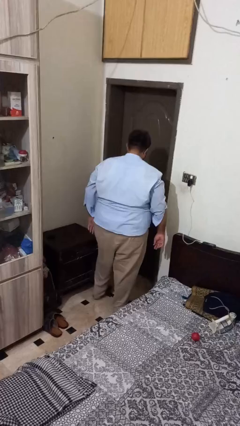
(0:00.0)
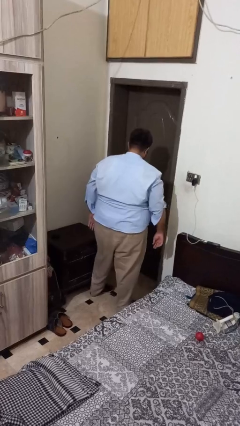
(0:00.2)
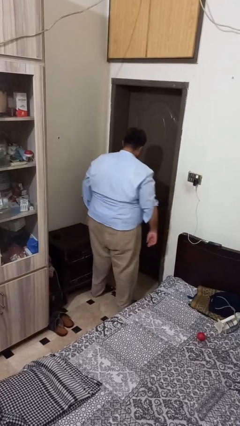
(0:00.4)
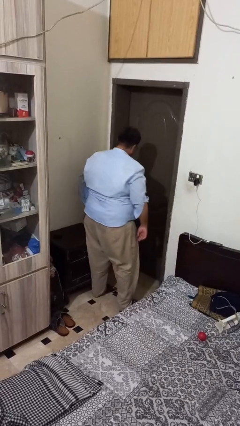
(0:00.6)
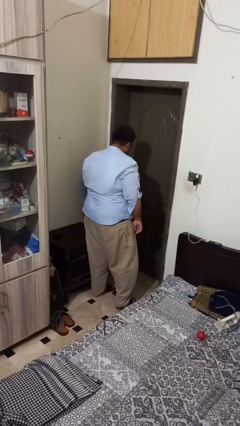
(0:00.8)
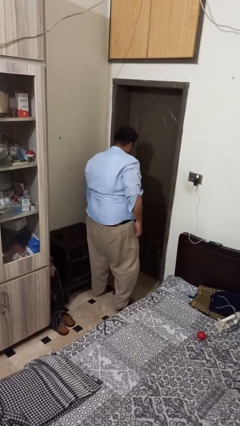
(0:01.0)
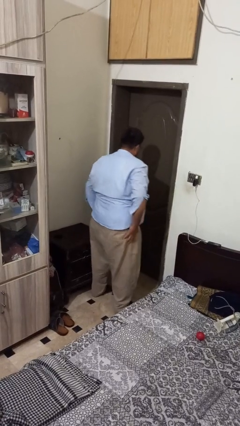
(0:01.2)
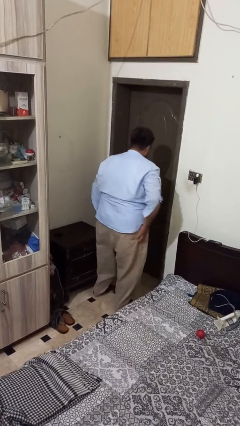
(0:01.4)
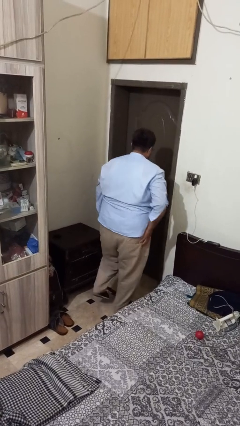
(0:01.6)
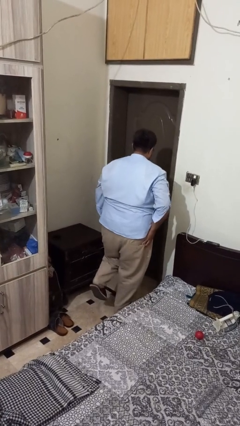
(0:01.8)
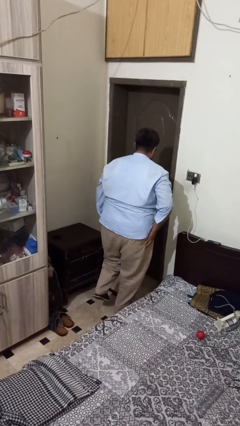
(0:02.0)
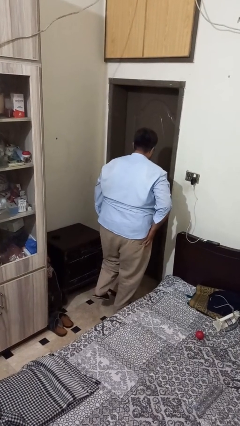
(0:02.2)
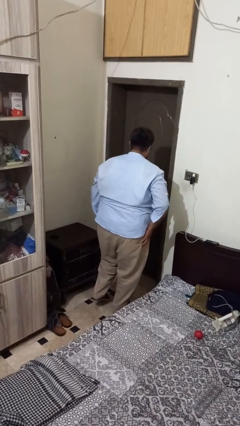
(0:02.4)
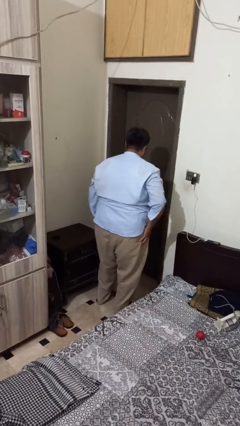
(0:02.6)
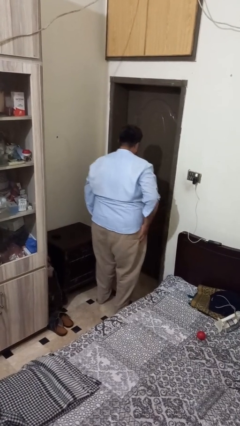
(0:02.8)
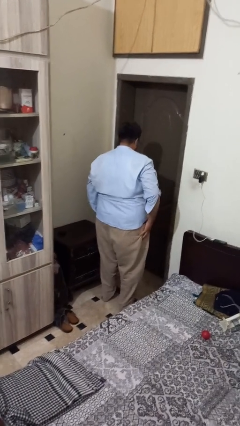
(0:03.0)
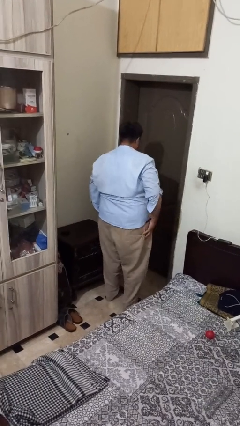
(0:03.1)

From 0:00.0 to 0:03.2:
person bumps into table

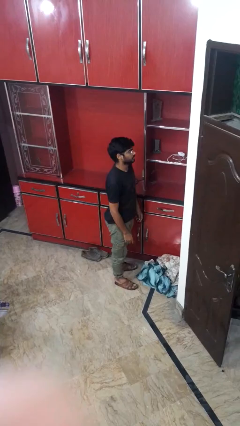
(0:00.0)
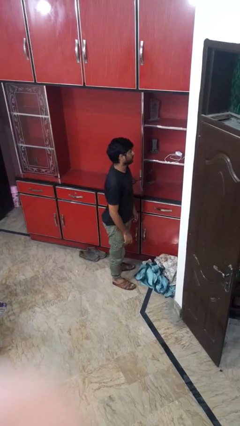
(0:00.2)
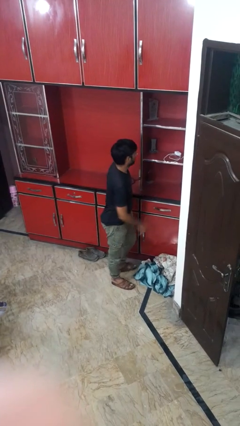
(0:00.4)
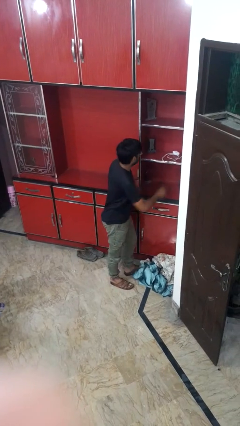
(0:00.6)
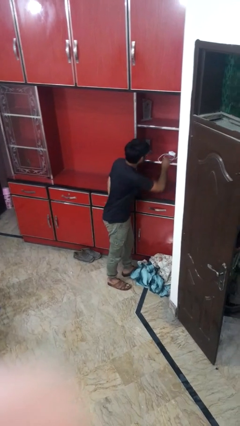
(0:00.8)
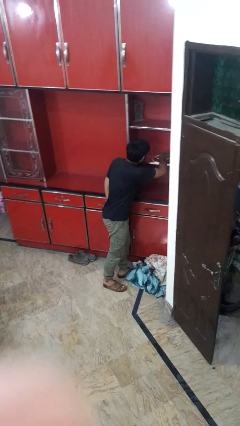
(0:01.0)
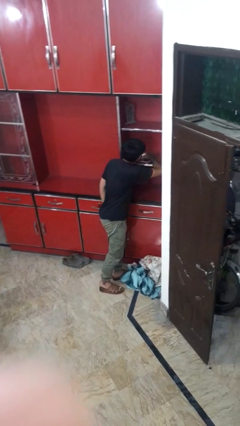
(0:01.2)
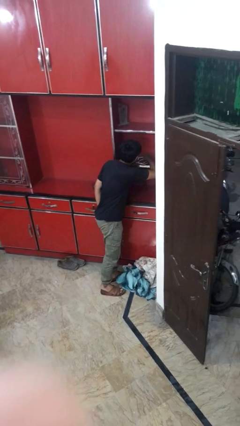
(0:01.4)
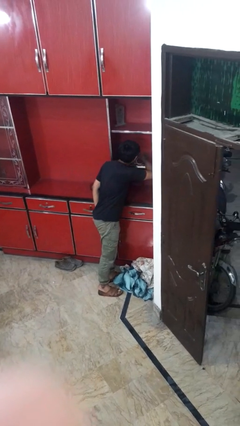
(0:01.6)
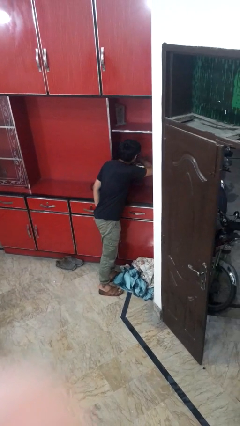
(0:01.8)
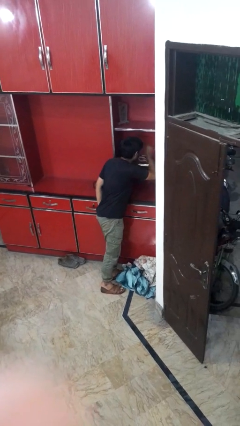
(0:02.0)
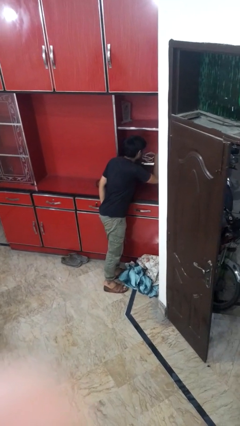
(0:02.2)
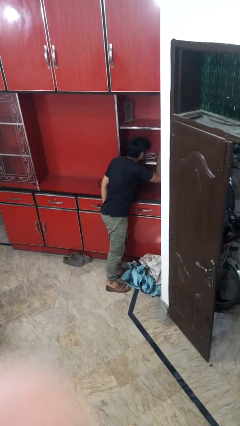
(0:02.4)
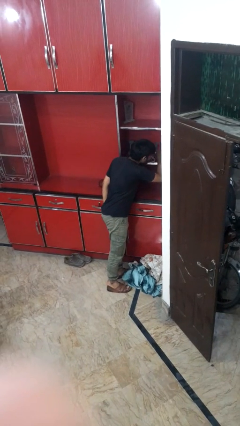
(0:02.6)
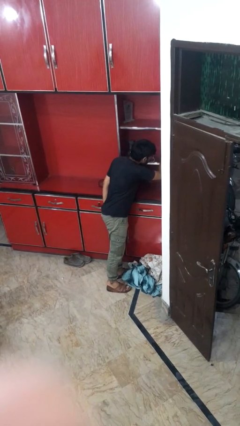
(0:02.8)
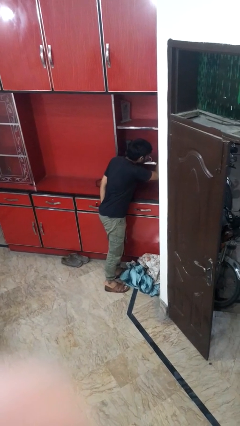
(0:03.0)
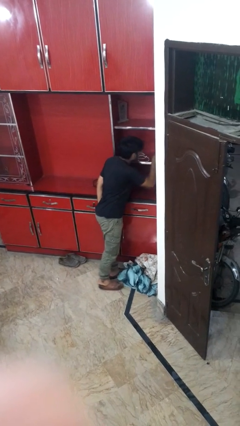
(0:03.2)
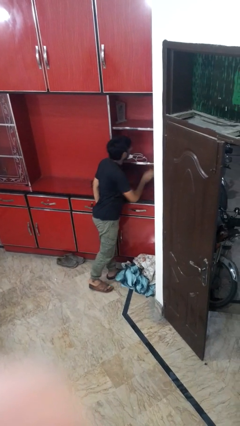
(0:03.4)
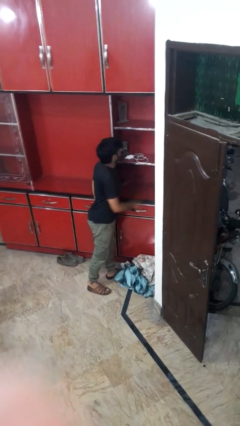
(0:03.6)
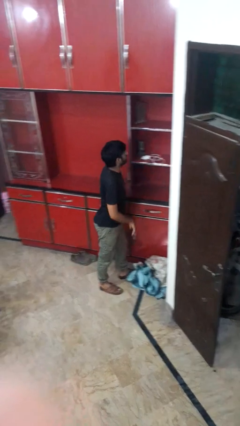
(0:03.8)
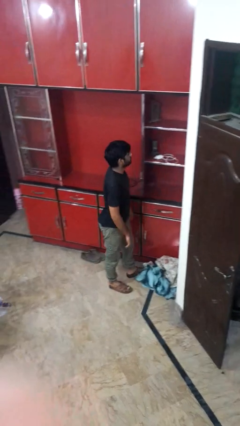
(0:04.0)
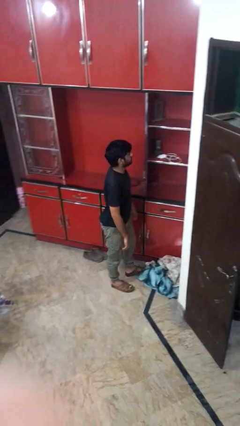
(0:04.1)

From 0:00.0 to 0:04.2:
person searches in cabinet

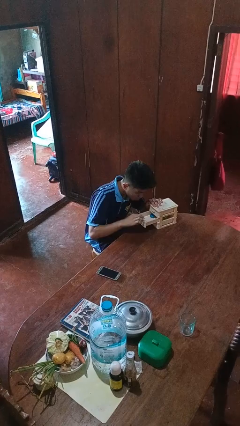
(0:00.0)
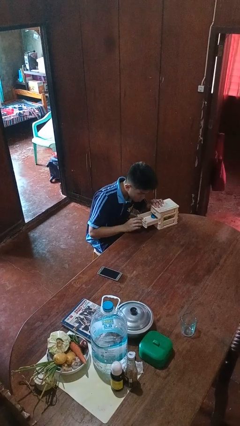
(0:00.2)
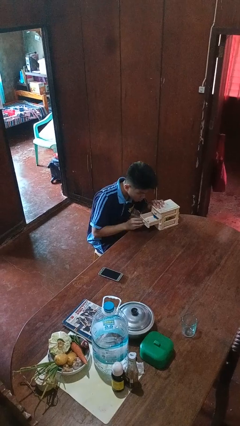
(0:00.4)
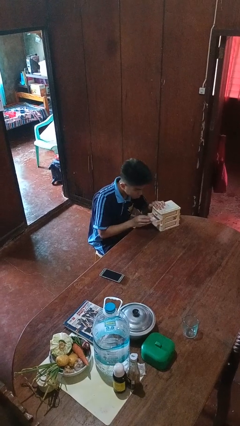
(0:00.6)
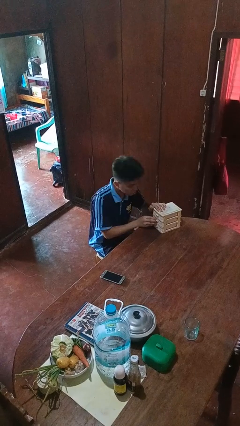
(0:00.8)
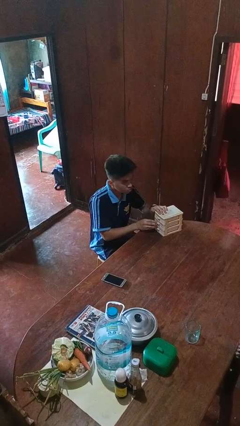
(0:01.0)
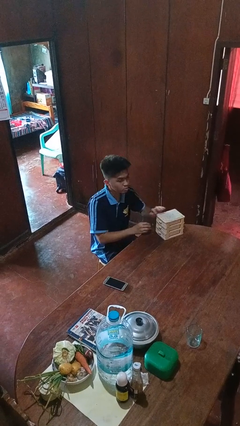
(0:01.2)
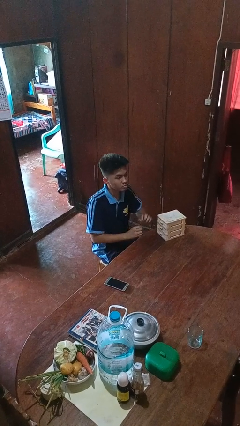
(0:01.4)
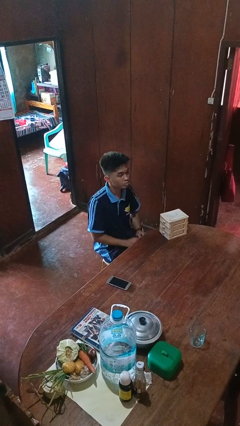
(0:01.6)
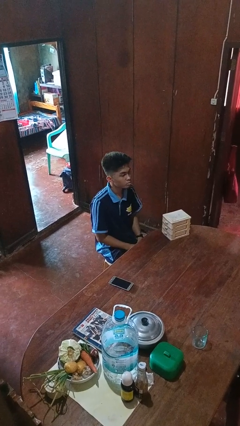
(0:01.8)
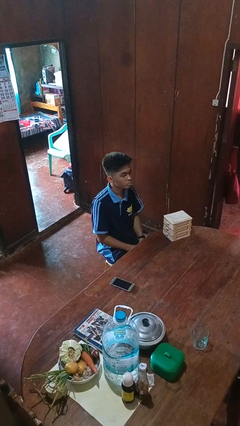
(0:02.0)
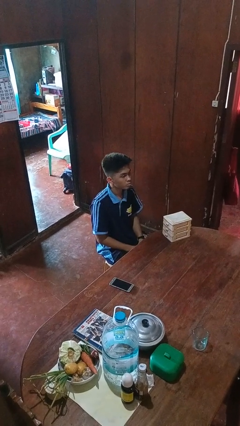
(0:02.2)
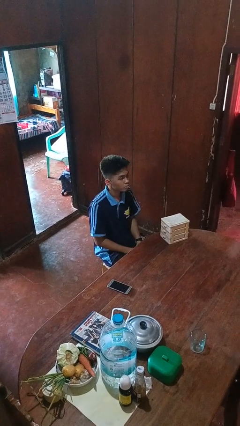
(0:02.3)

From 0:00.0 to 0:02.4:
person closes jewelry box

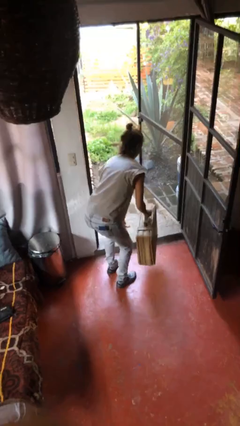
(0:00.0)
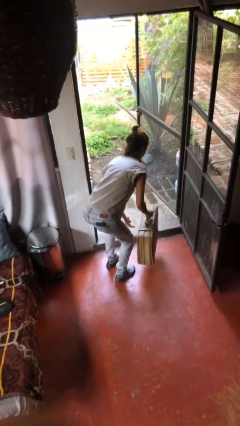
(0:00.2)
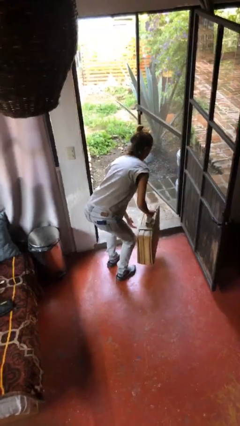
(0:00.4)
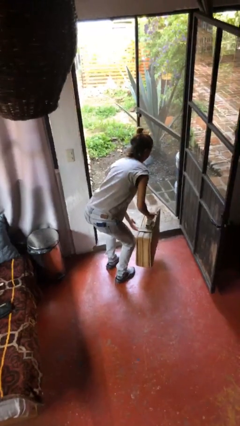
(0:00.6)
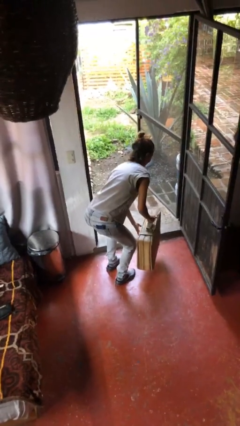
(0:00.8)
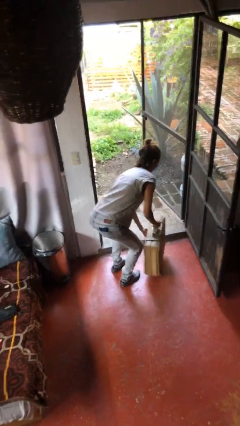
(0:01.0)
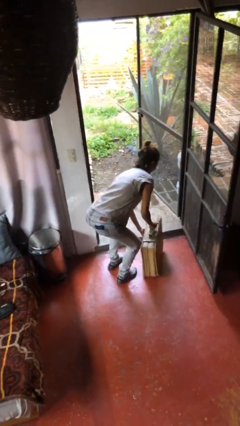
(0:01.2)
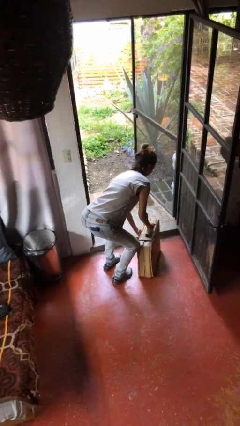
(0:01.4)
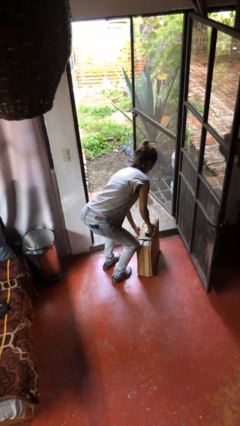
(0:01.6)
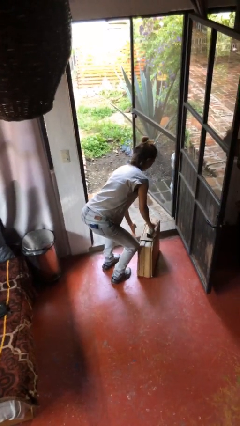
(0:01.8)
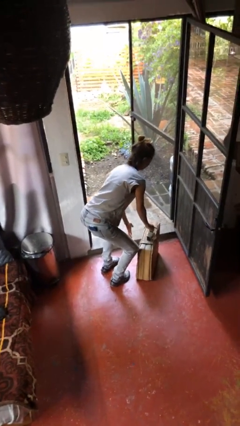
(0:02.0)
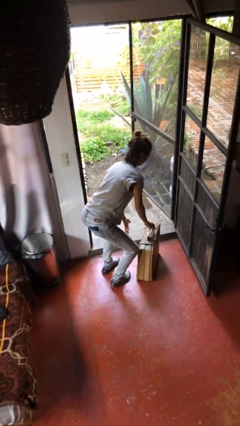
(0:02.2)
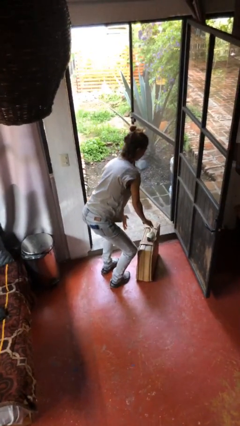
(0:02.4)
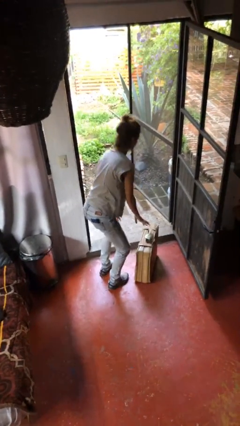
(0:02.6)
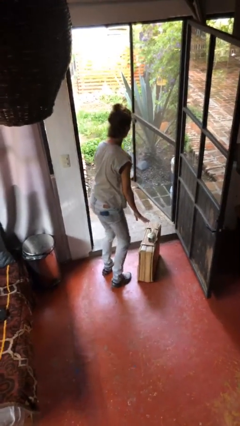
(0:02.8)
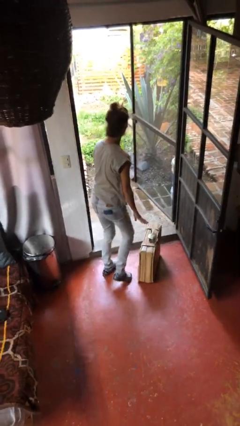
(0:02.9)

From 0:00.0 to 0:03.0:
person puts down object on floor

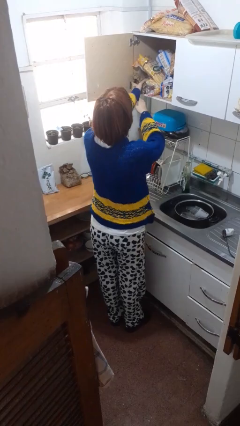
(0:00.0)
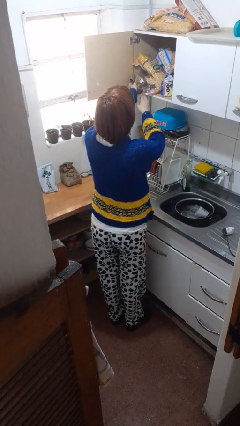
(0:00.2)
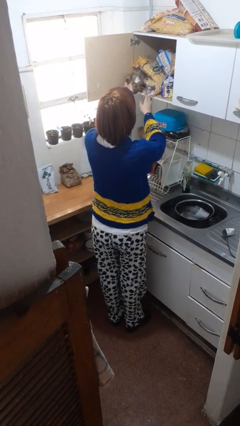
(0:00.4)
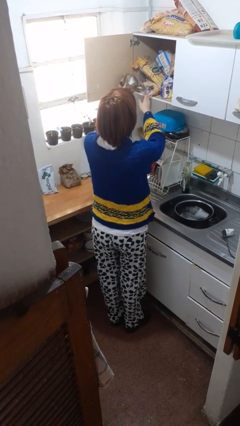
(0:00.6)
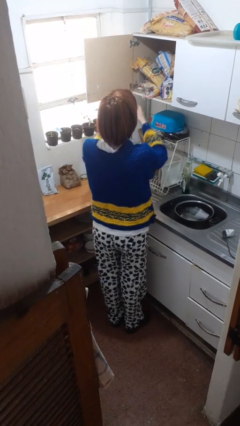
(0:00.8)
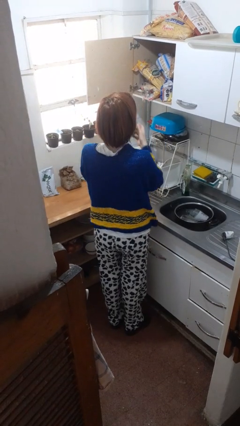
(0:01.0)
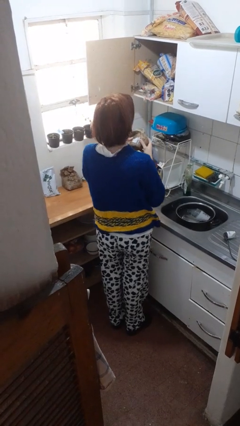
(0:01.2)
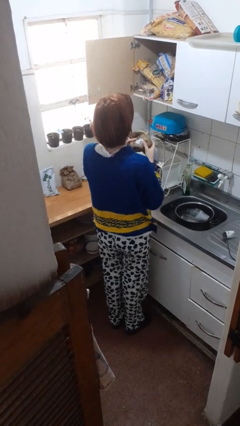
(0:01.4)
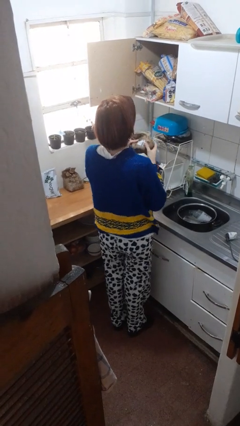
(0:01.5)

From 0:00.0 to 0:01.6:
person takes object from cabinet

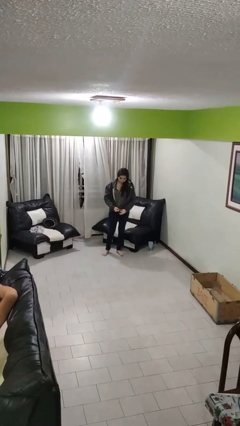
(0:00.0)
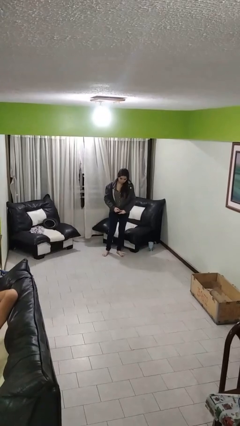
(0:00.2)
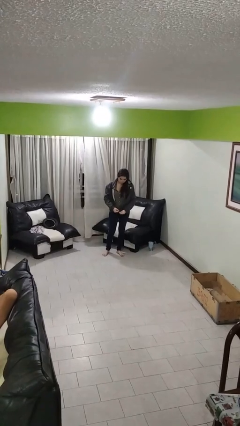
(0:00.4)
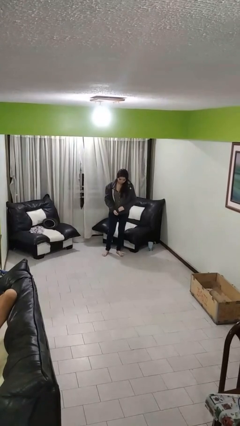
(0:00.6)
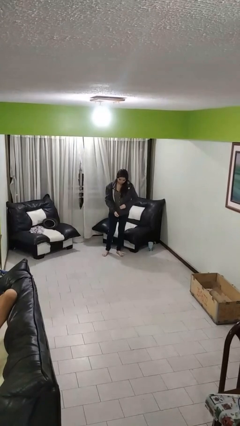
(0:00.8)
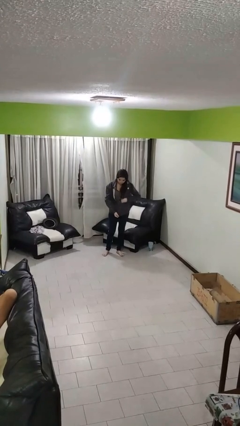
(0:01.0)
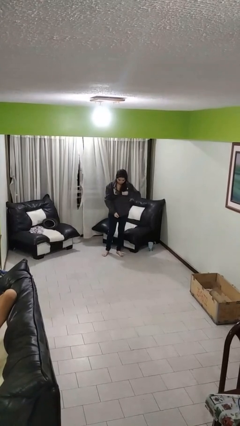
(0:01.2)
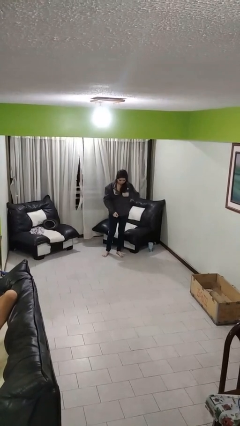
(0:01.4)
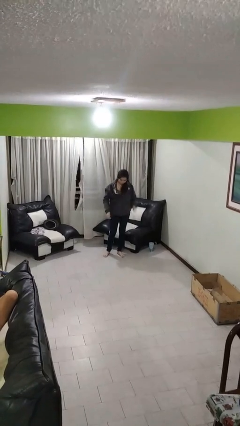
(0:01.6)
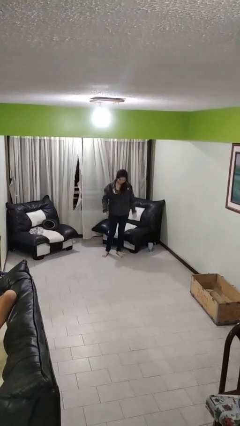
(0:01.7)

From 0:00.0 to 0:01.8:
person zips up jacket

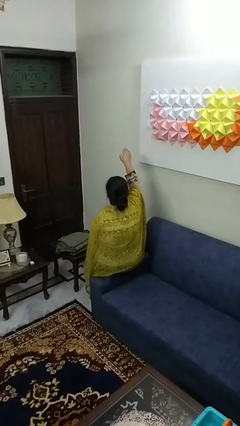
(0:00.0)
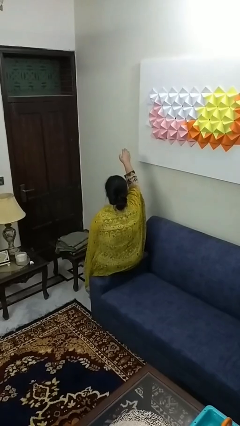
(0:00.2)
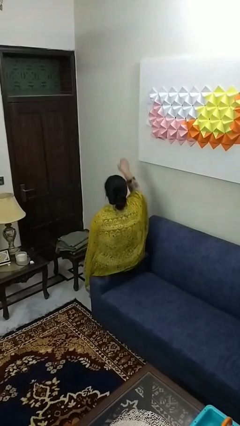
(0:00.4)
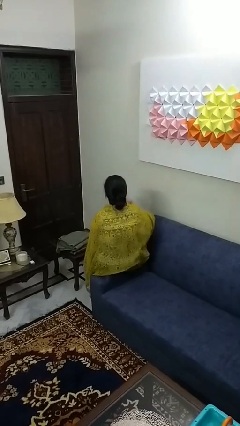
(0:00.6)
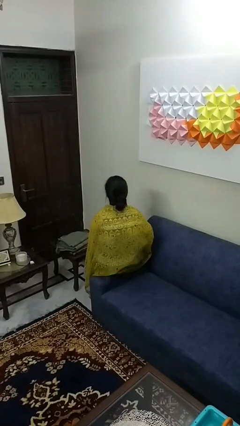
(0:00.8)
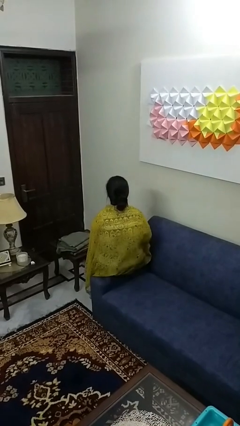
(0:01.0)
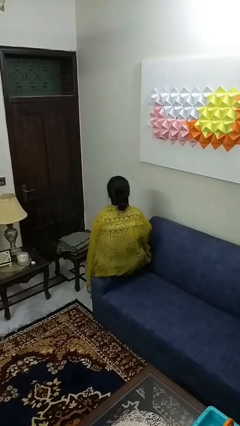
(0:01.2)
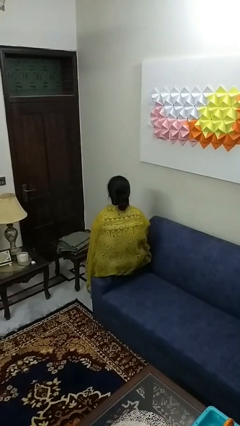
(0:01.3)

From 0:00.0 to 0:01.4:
person gestures swipe down
